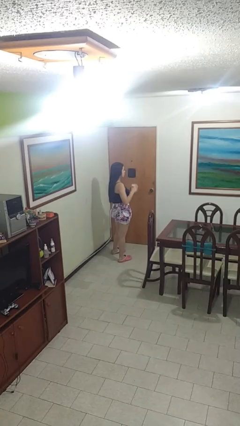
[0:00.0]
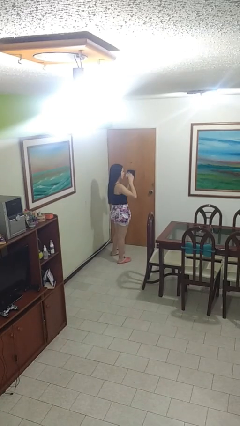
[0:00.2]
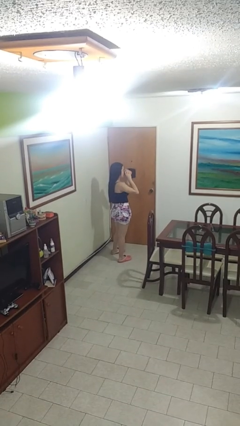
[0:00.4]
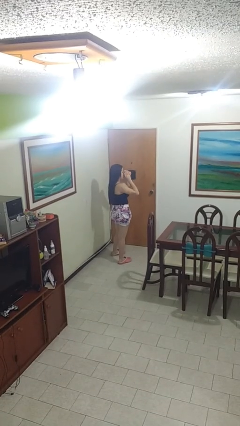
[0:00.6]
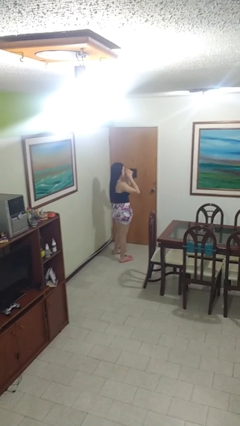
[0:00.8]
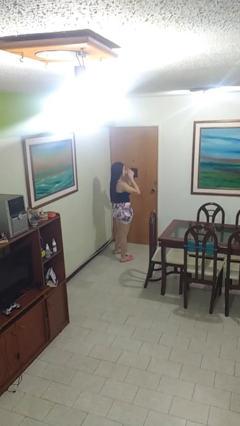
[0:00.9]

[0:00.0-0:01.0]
person drinks from mug

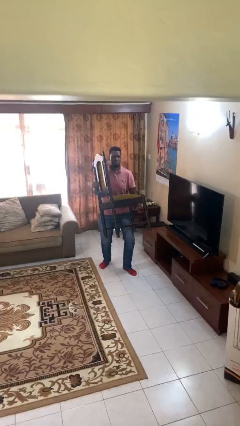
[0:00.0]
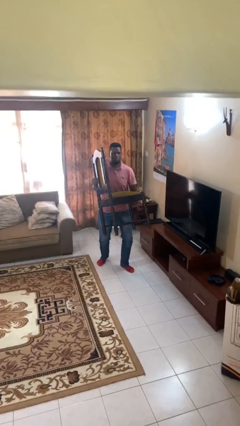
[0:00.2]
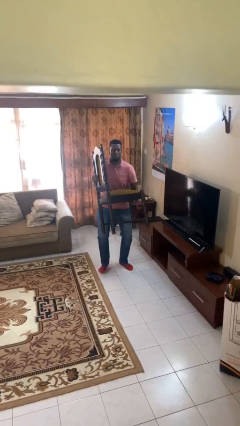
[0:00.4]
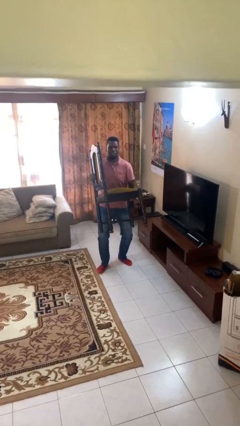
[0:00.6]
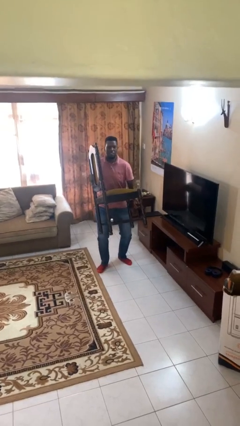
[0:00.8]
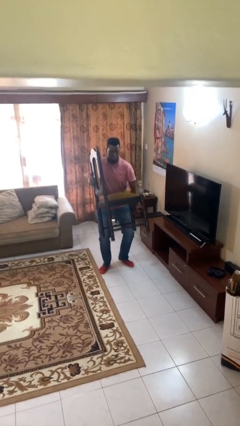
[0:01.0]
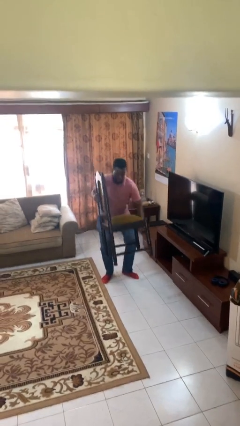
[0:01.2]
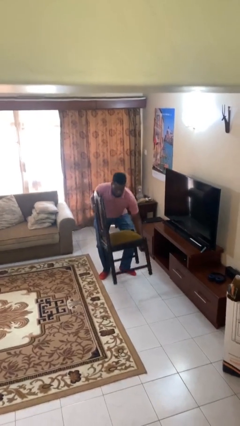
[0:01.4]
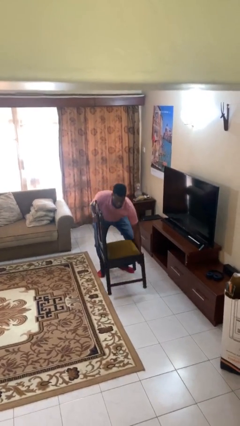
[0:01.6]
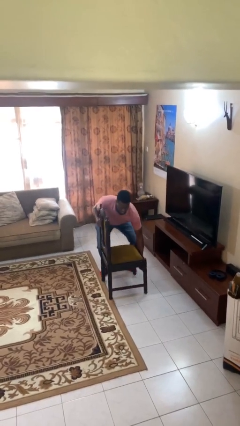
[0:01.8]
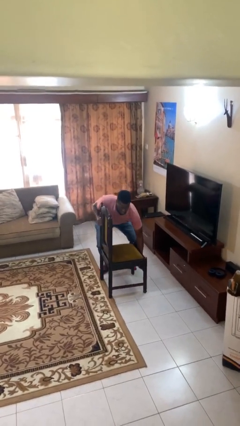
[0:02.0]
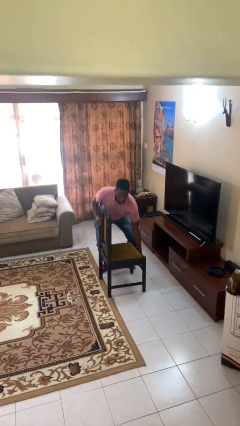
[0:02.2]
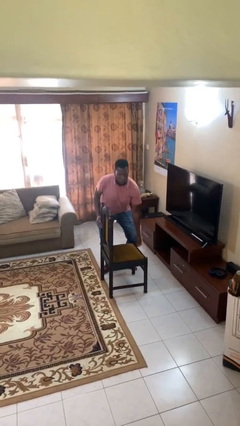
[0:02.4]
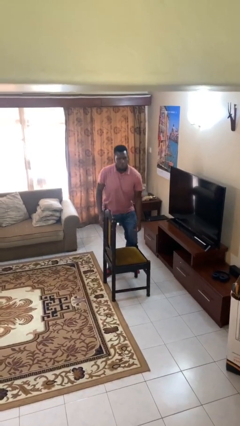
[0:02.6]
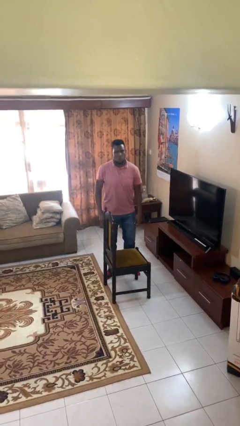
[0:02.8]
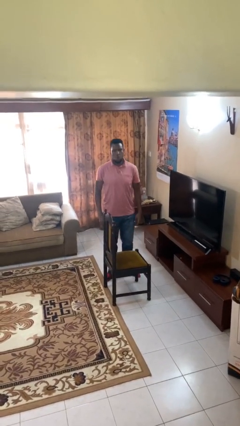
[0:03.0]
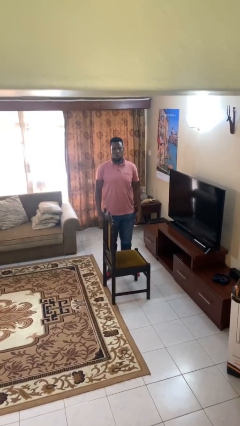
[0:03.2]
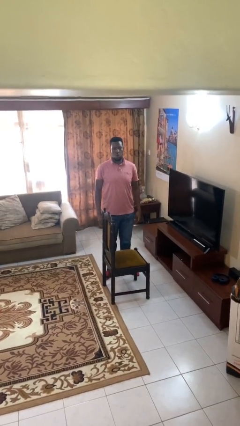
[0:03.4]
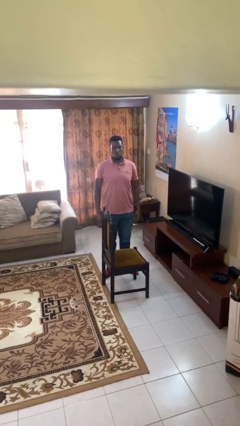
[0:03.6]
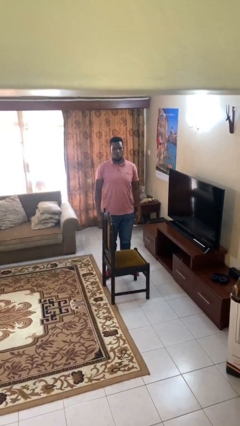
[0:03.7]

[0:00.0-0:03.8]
person puts down object on floor

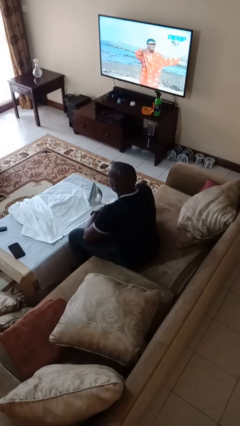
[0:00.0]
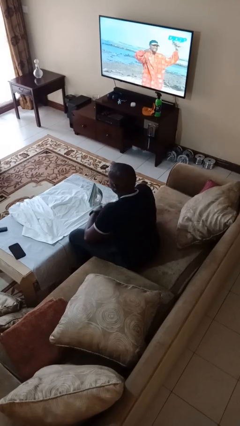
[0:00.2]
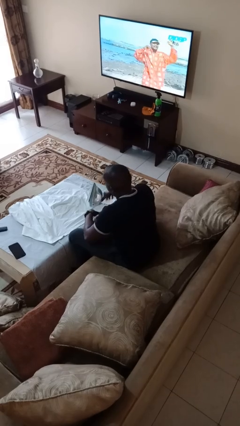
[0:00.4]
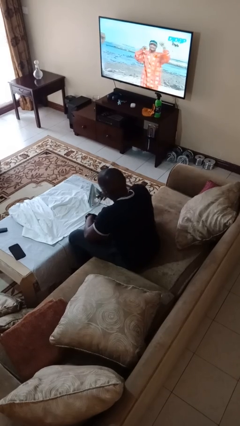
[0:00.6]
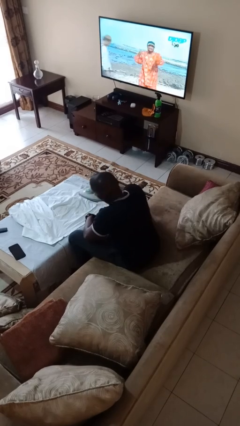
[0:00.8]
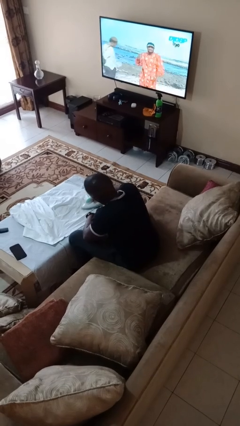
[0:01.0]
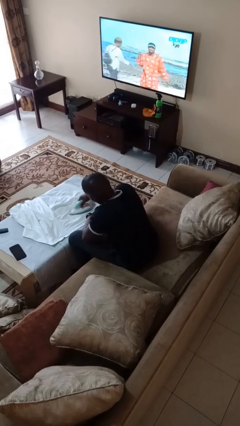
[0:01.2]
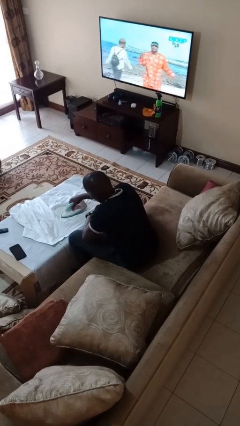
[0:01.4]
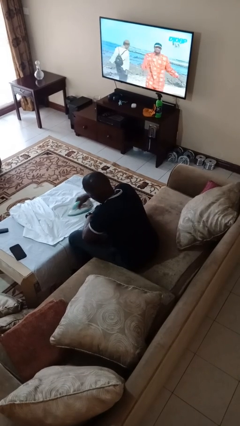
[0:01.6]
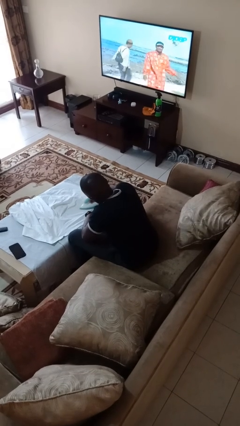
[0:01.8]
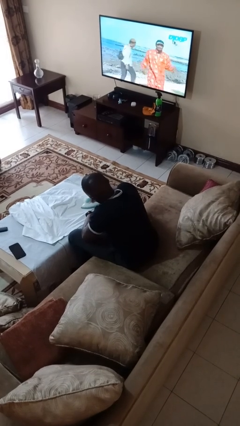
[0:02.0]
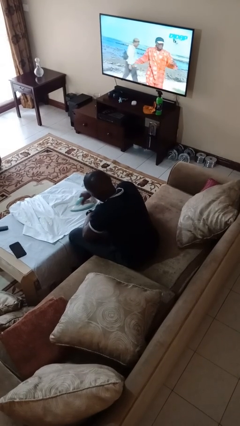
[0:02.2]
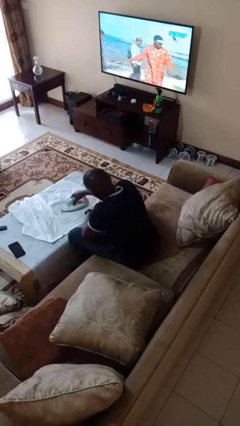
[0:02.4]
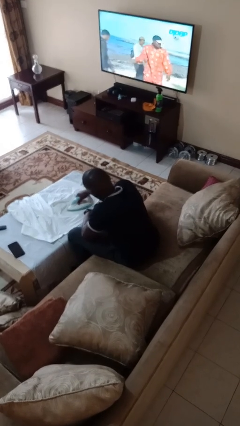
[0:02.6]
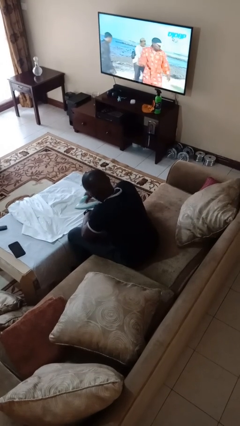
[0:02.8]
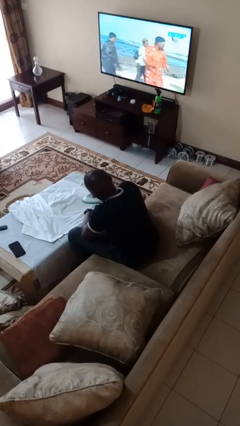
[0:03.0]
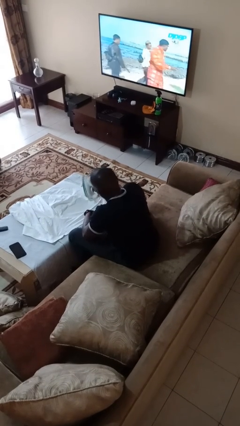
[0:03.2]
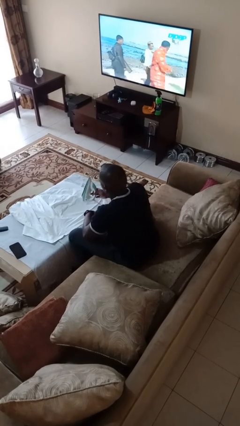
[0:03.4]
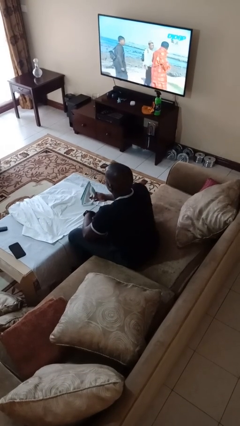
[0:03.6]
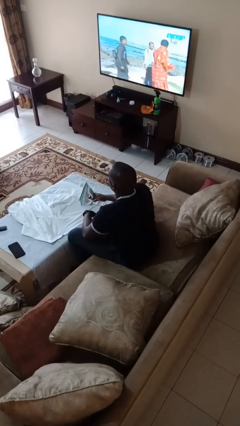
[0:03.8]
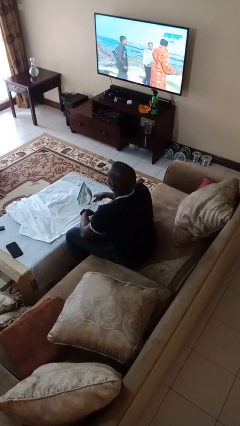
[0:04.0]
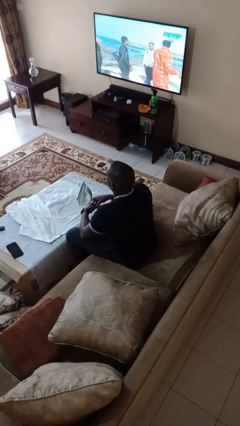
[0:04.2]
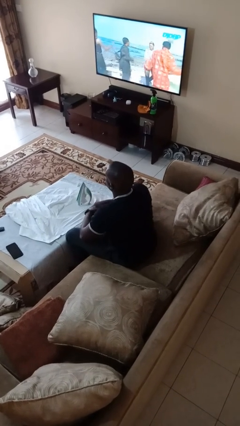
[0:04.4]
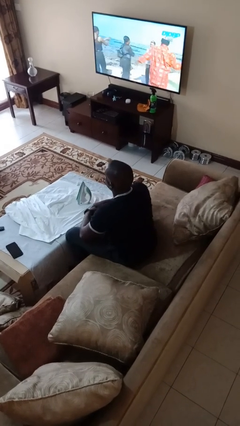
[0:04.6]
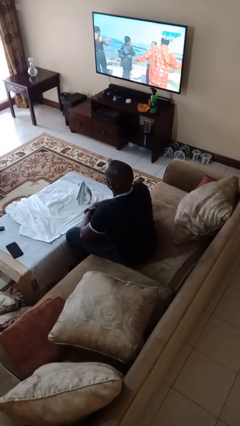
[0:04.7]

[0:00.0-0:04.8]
person irons clothes

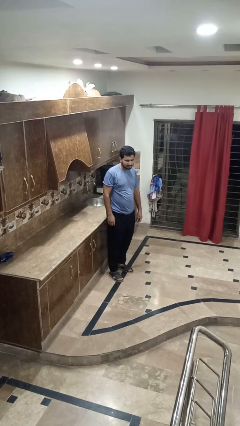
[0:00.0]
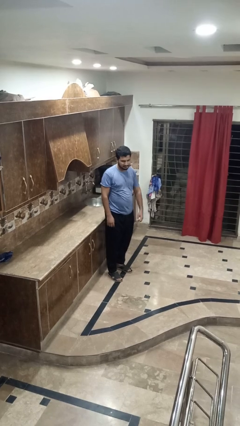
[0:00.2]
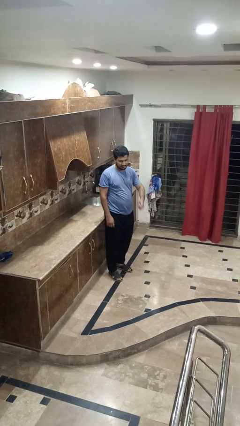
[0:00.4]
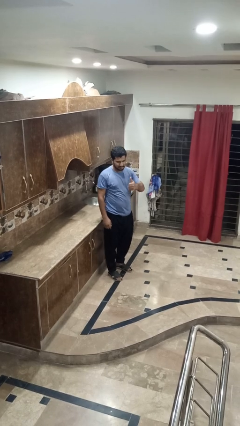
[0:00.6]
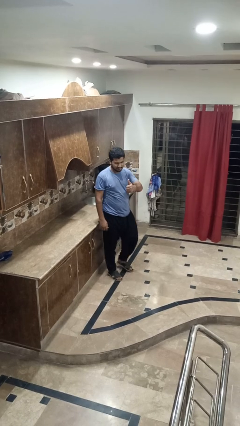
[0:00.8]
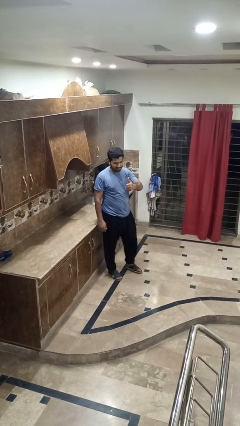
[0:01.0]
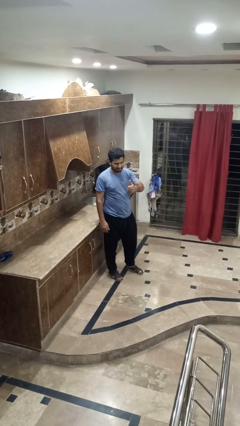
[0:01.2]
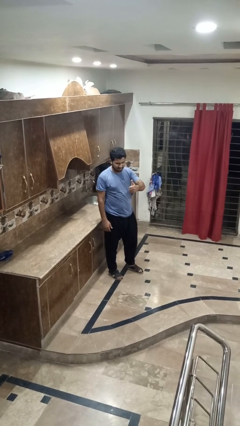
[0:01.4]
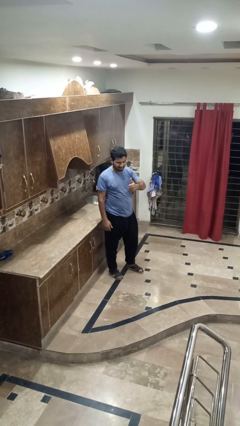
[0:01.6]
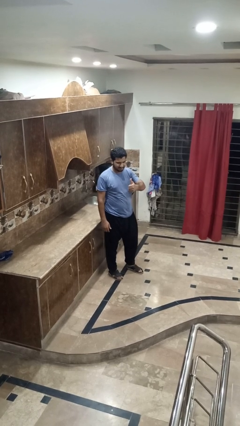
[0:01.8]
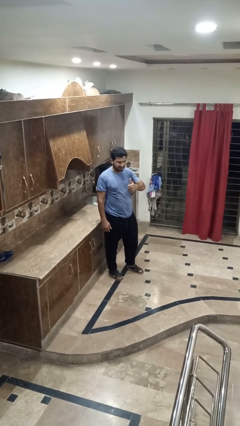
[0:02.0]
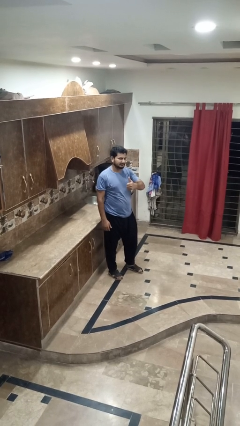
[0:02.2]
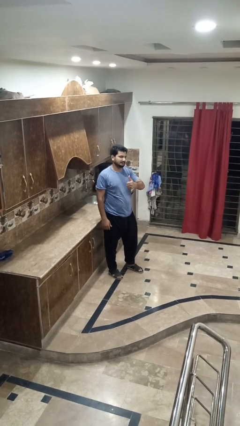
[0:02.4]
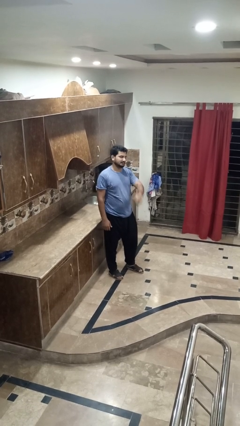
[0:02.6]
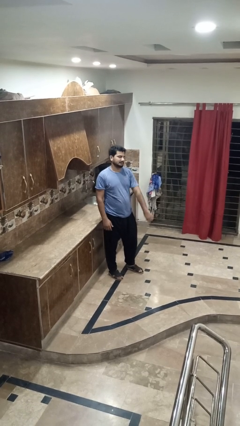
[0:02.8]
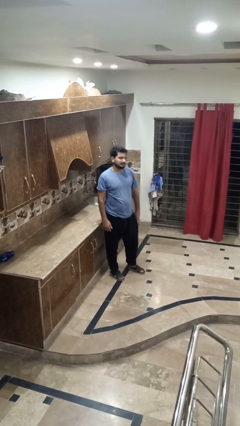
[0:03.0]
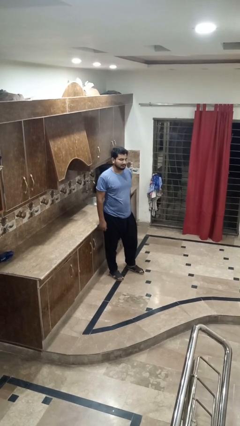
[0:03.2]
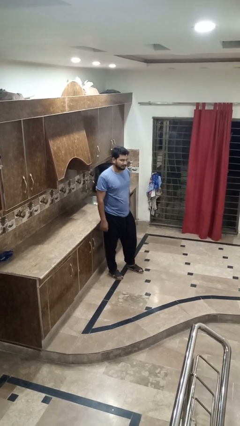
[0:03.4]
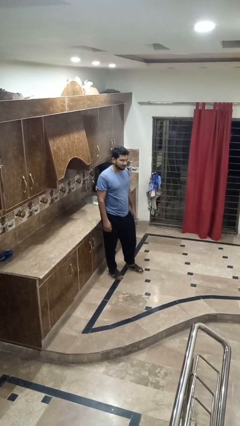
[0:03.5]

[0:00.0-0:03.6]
person gestures thumbs up

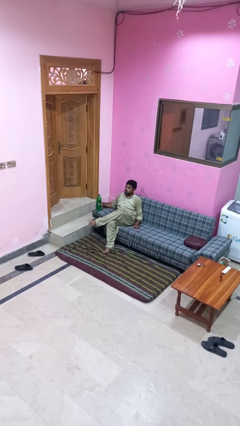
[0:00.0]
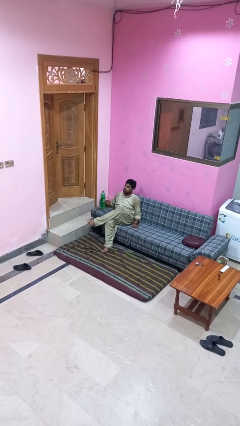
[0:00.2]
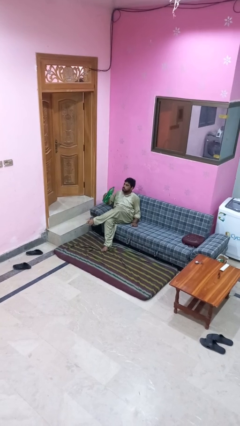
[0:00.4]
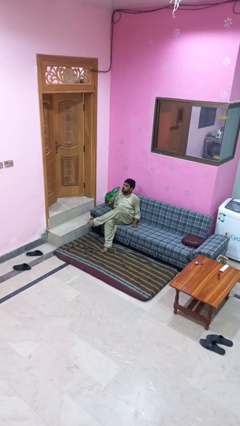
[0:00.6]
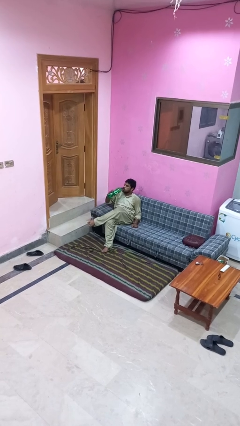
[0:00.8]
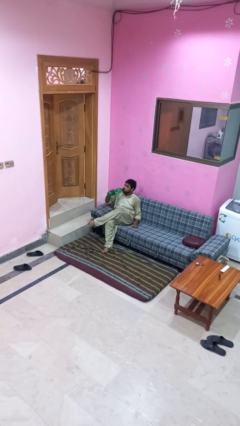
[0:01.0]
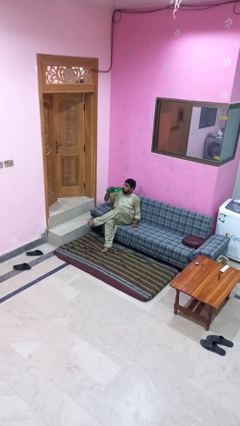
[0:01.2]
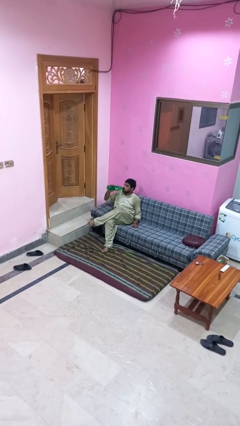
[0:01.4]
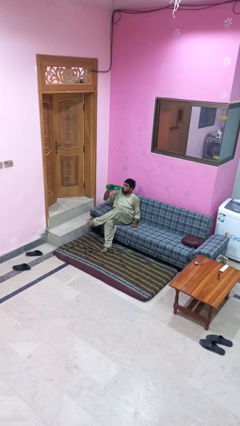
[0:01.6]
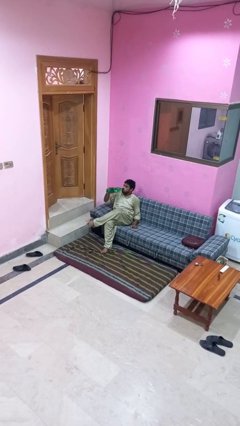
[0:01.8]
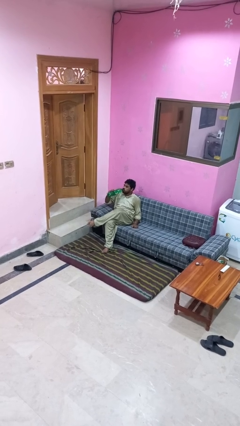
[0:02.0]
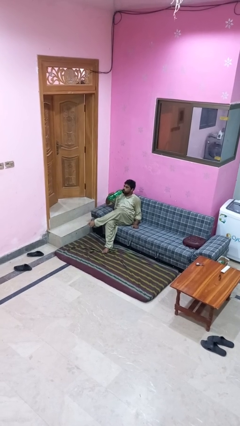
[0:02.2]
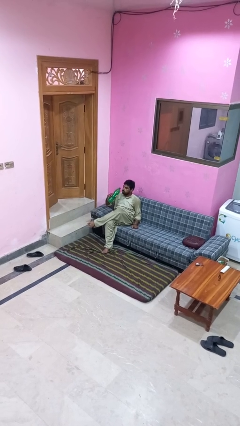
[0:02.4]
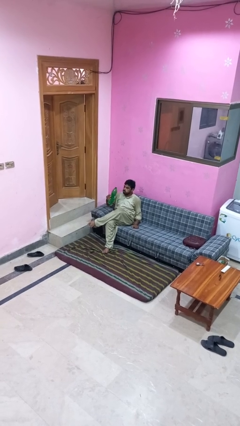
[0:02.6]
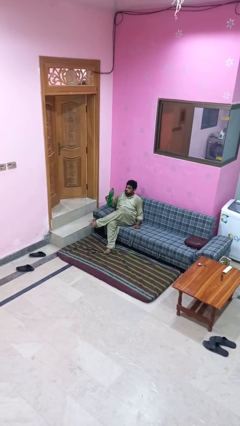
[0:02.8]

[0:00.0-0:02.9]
person drinks from bottle

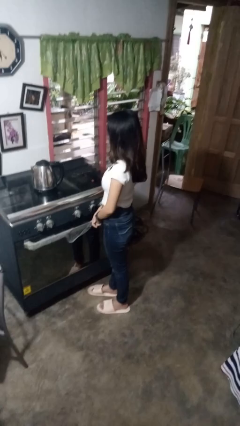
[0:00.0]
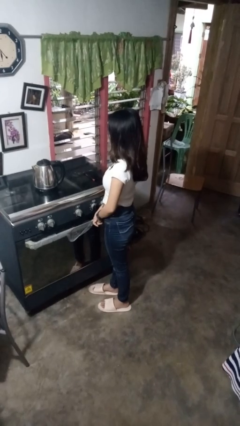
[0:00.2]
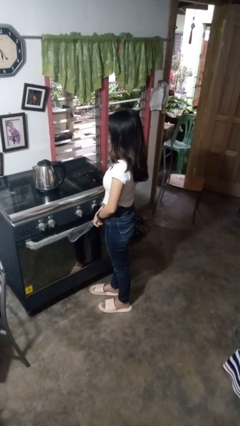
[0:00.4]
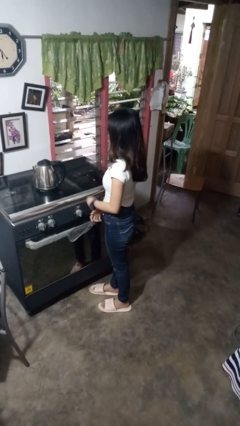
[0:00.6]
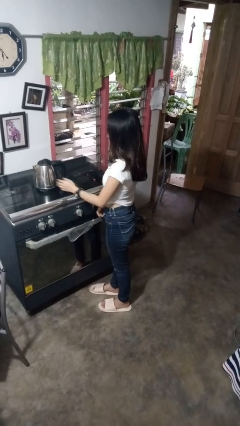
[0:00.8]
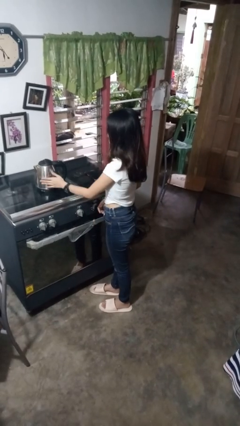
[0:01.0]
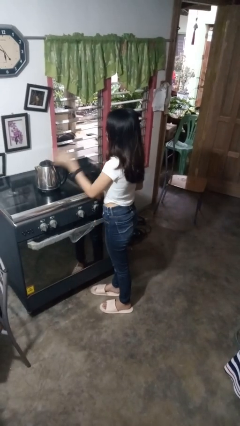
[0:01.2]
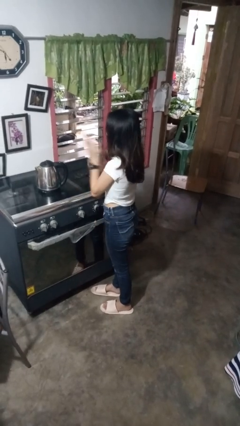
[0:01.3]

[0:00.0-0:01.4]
person burns hand
